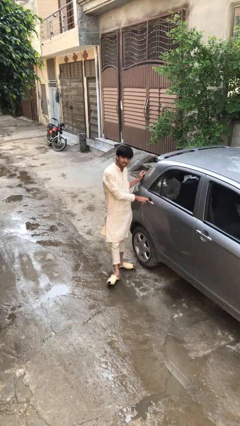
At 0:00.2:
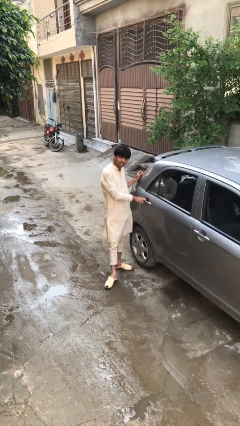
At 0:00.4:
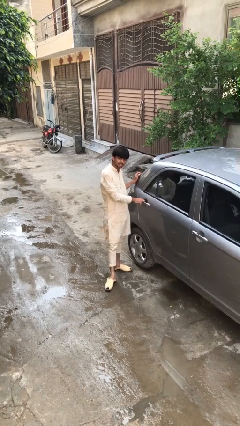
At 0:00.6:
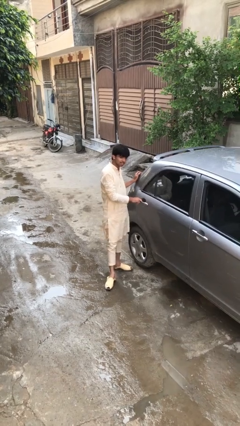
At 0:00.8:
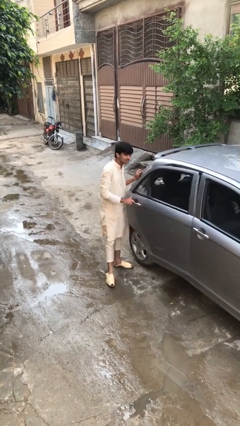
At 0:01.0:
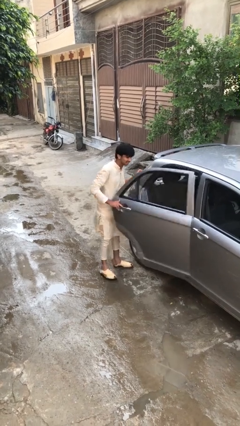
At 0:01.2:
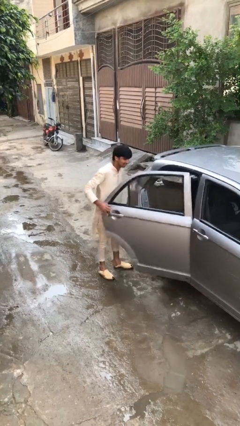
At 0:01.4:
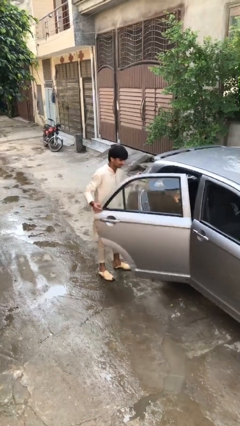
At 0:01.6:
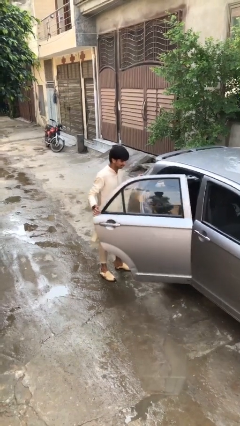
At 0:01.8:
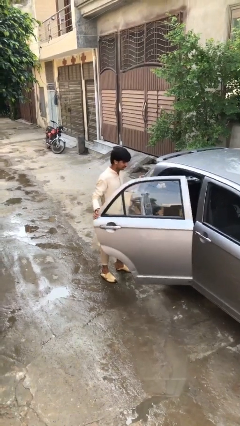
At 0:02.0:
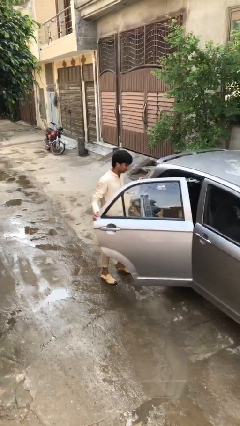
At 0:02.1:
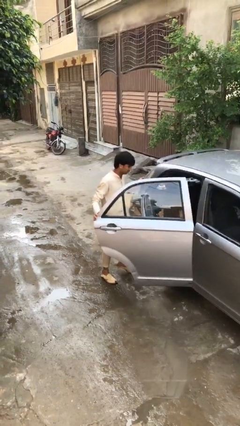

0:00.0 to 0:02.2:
person opens car door

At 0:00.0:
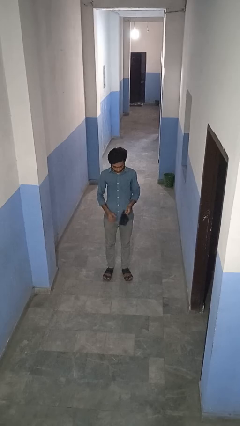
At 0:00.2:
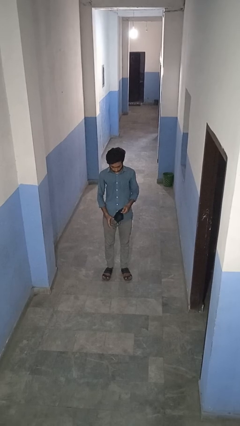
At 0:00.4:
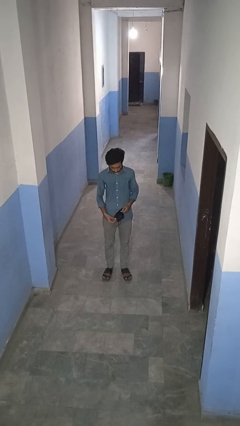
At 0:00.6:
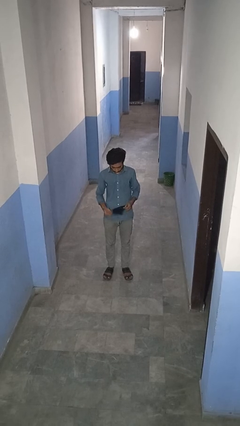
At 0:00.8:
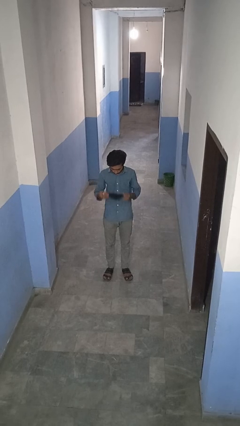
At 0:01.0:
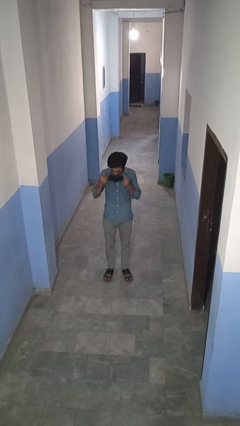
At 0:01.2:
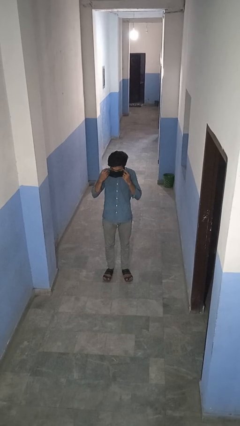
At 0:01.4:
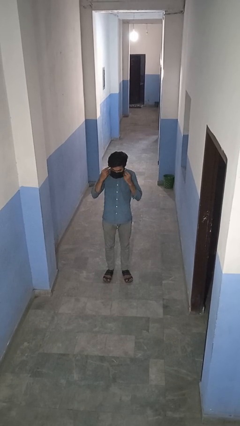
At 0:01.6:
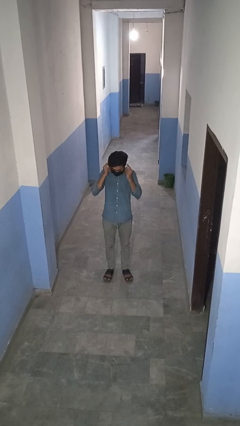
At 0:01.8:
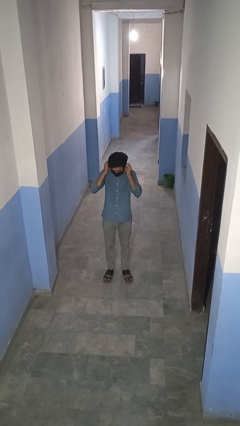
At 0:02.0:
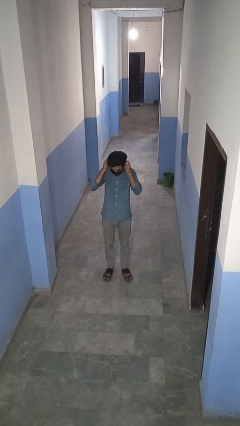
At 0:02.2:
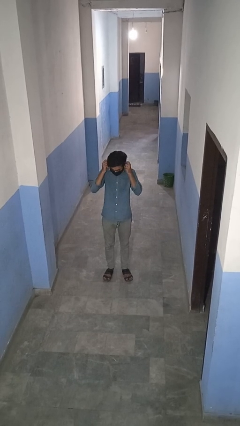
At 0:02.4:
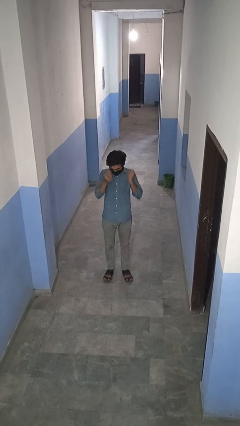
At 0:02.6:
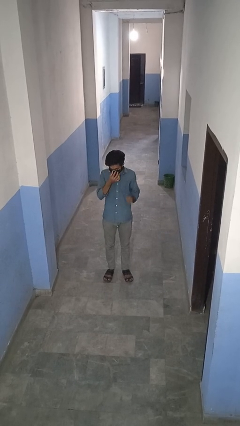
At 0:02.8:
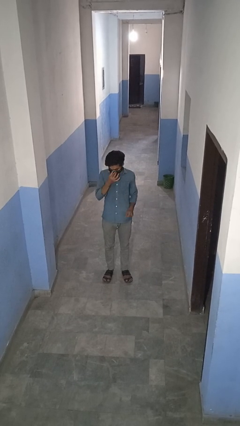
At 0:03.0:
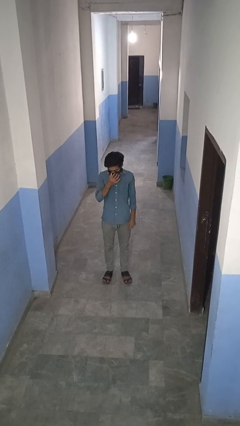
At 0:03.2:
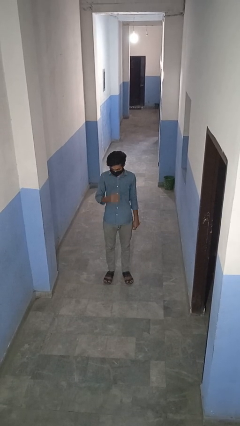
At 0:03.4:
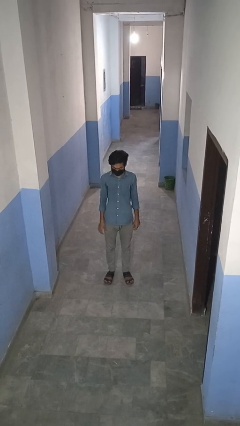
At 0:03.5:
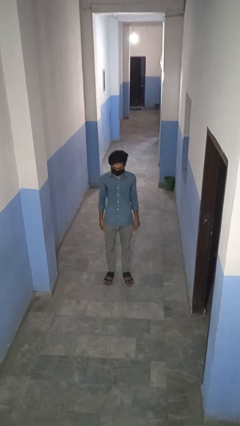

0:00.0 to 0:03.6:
person puts on facemask

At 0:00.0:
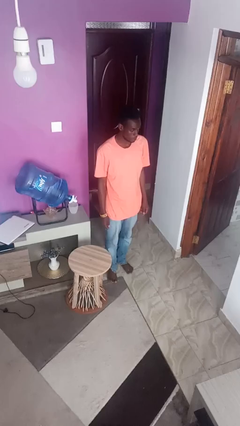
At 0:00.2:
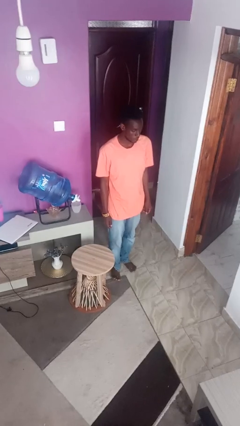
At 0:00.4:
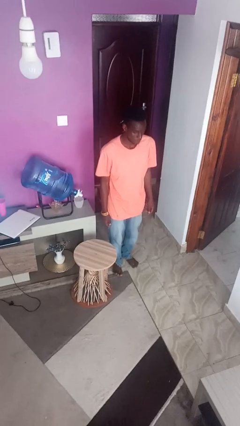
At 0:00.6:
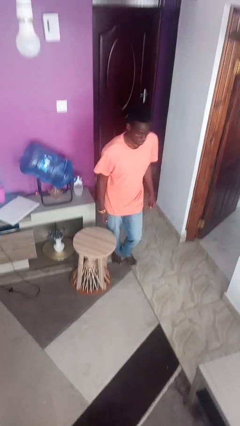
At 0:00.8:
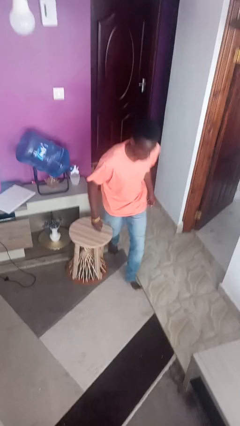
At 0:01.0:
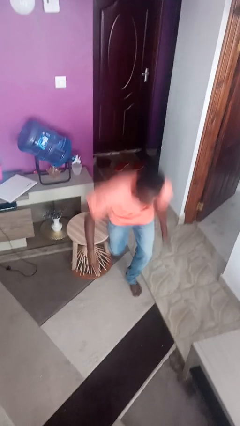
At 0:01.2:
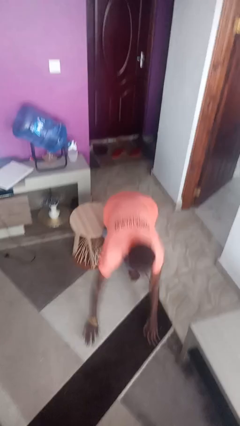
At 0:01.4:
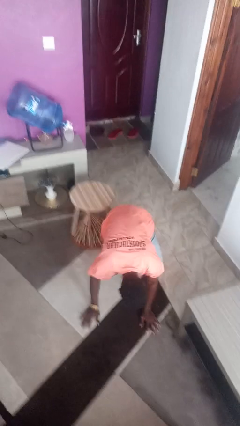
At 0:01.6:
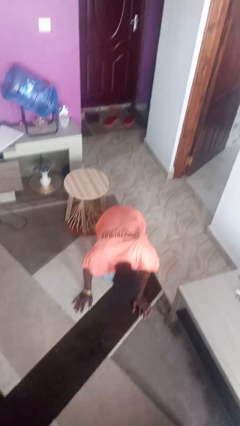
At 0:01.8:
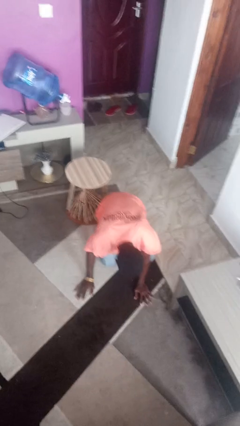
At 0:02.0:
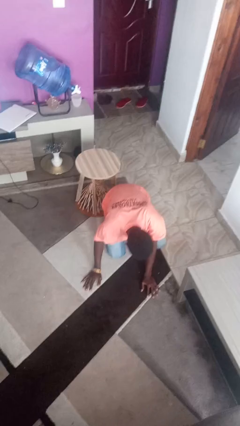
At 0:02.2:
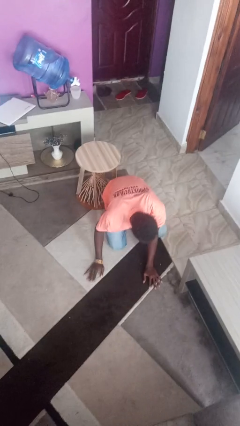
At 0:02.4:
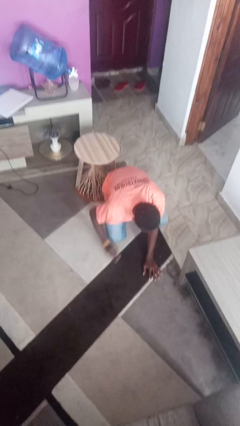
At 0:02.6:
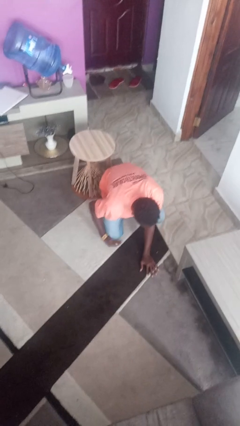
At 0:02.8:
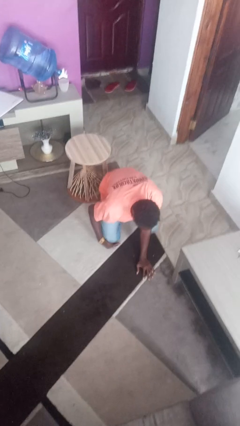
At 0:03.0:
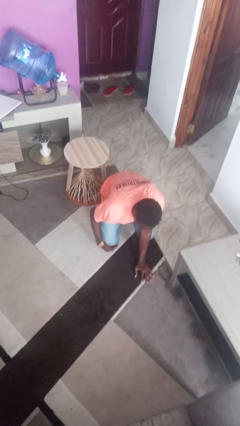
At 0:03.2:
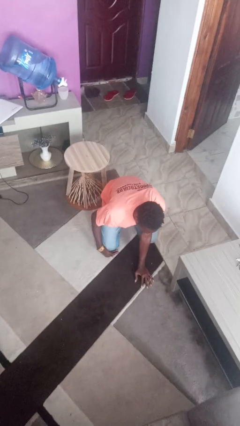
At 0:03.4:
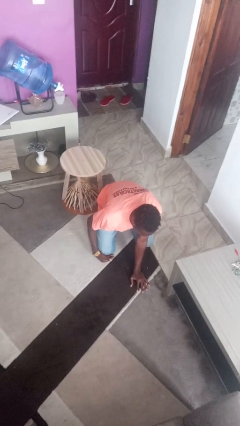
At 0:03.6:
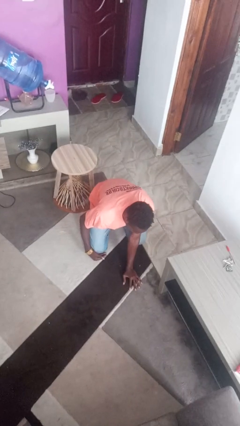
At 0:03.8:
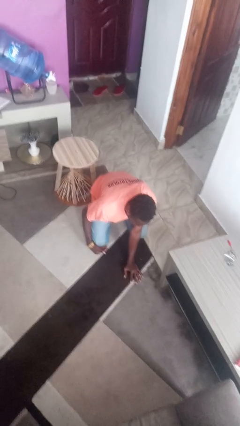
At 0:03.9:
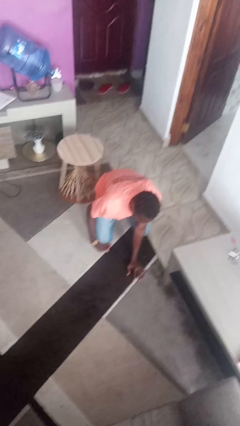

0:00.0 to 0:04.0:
person trips on object on floor

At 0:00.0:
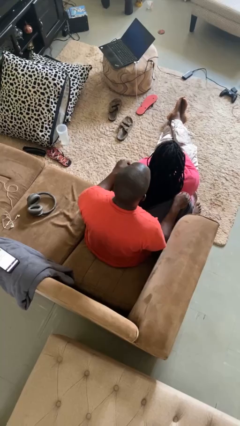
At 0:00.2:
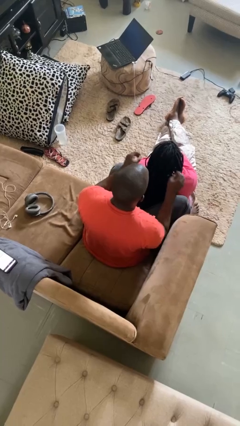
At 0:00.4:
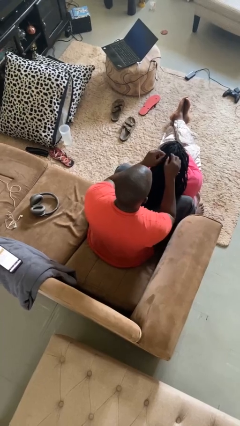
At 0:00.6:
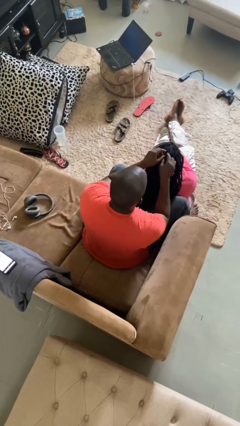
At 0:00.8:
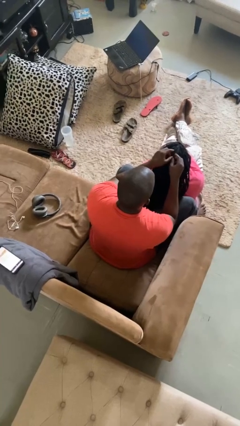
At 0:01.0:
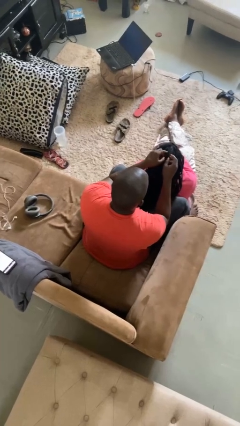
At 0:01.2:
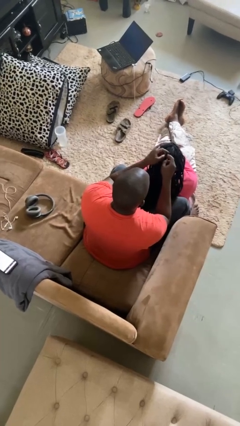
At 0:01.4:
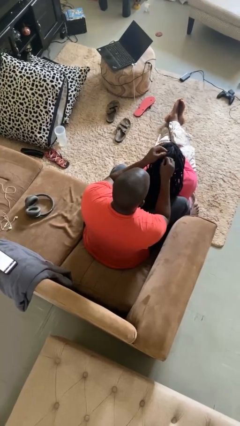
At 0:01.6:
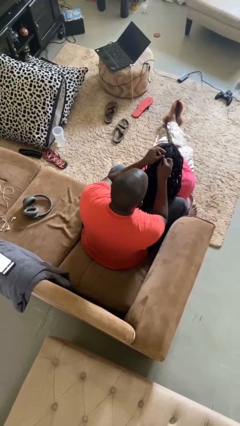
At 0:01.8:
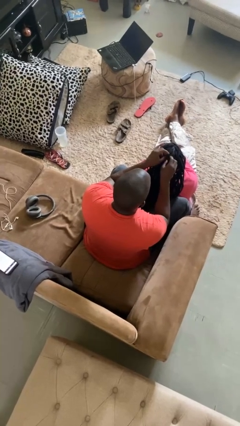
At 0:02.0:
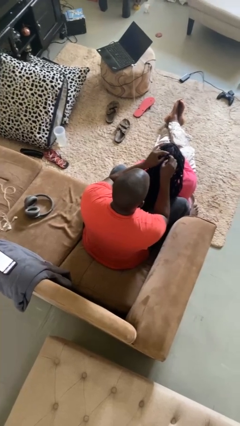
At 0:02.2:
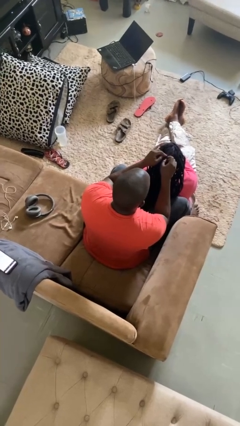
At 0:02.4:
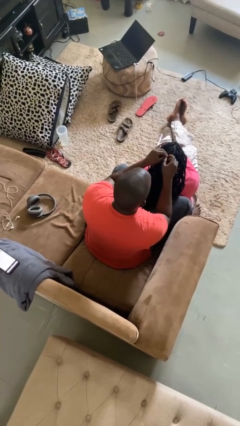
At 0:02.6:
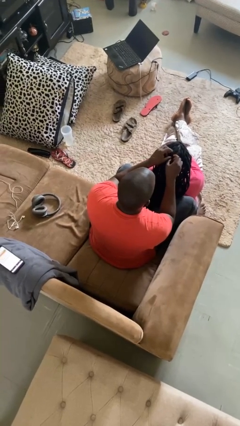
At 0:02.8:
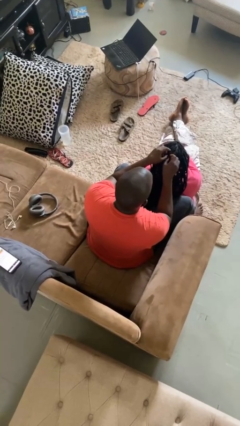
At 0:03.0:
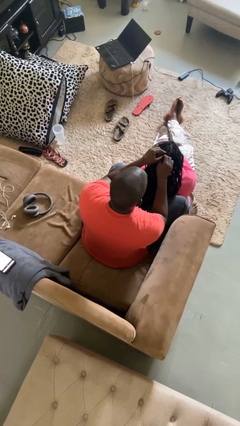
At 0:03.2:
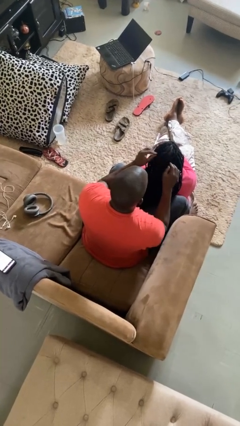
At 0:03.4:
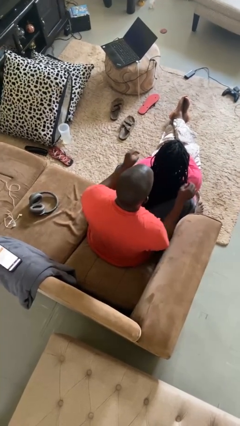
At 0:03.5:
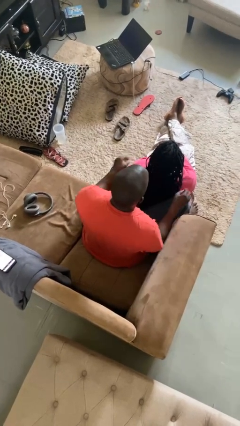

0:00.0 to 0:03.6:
person braids hair of person

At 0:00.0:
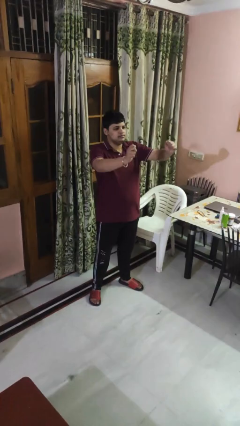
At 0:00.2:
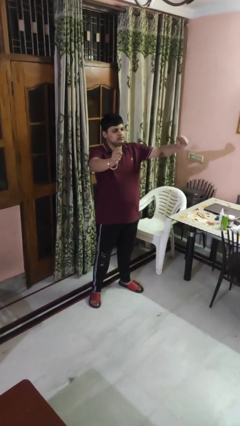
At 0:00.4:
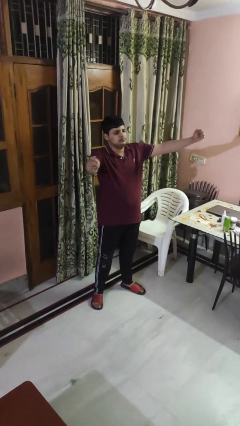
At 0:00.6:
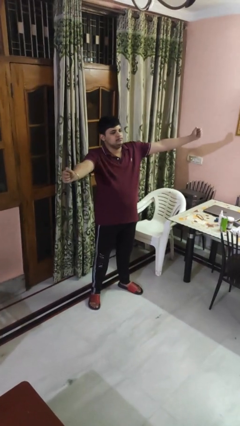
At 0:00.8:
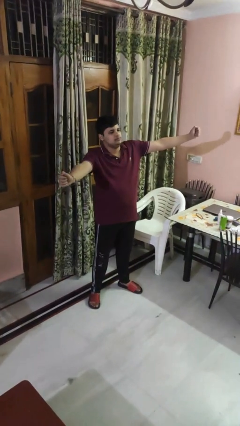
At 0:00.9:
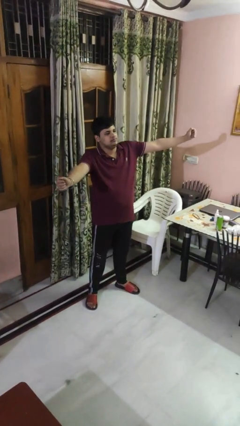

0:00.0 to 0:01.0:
person gestures zoom in

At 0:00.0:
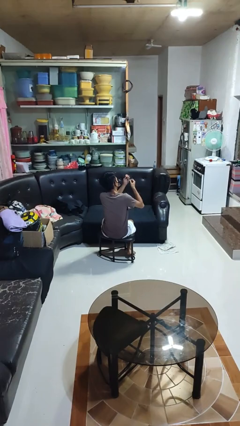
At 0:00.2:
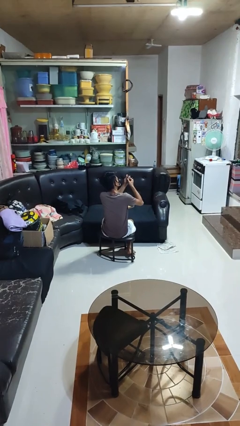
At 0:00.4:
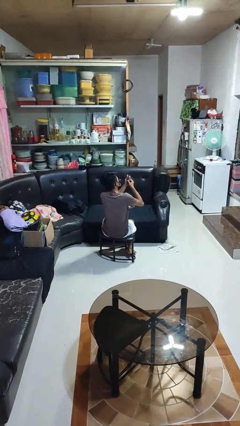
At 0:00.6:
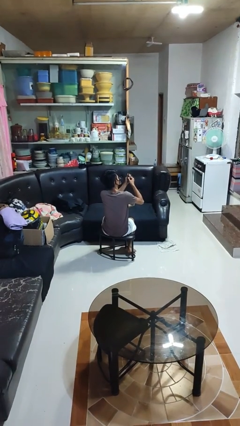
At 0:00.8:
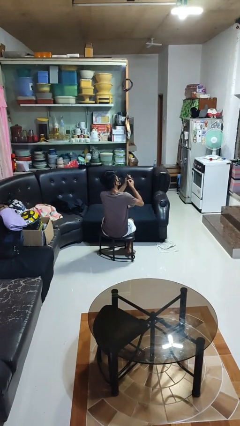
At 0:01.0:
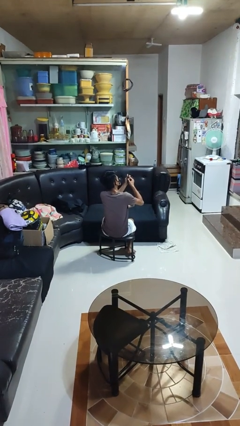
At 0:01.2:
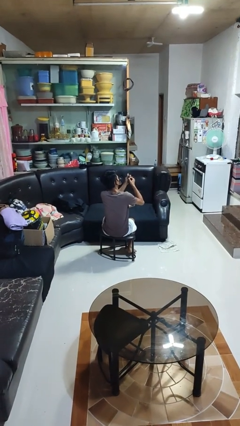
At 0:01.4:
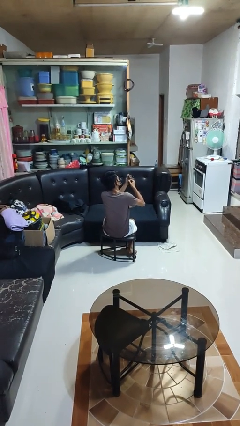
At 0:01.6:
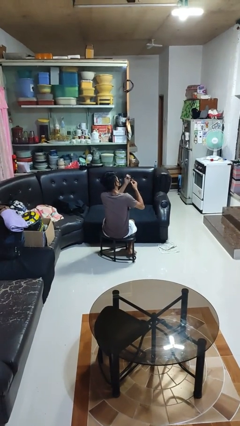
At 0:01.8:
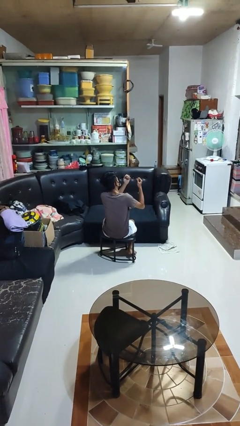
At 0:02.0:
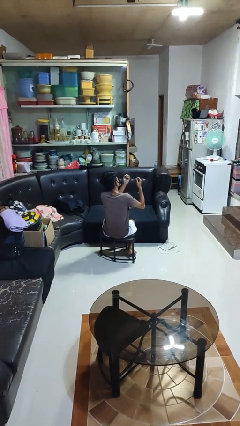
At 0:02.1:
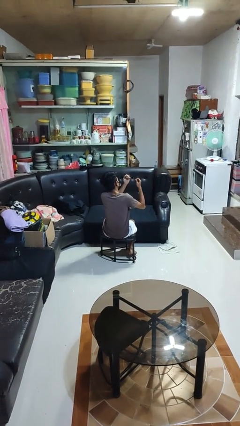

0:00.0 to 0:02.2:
person files fingernails

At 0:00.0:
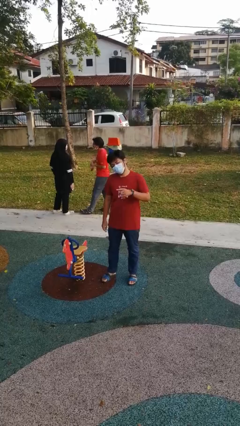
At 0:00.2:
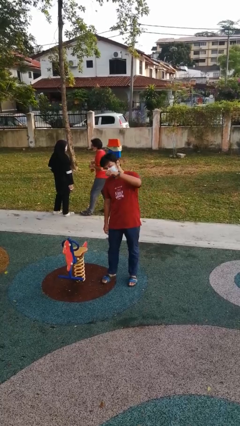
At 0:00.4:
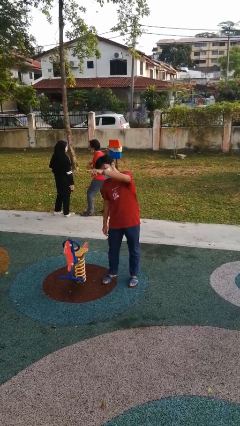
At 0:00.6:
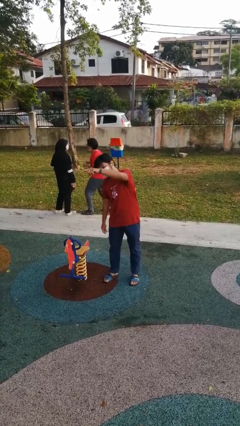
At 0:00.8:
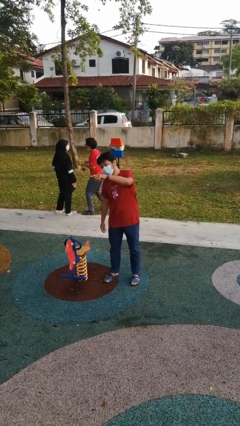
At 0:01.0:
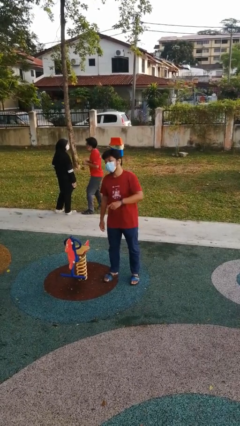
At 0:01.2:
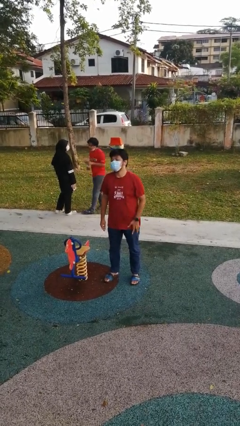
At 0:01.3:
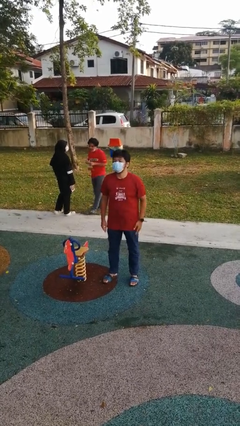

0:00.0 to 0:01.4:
person points at person
